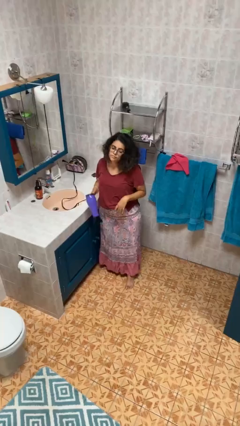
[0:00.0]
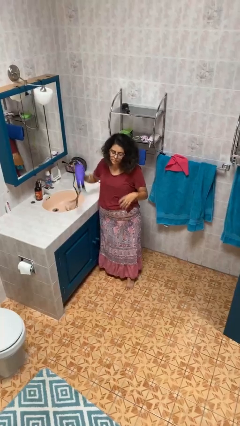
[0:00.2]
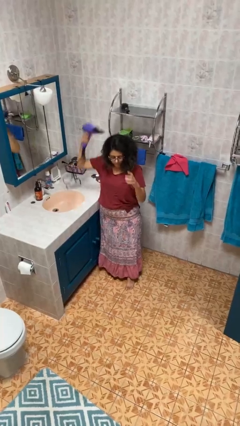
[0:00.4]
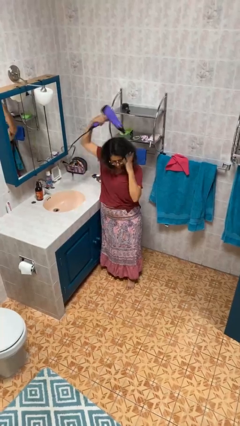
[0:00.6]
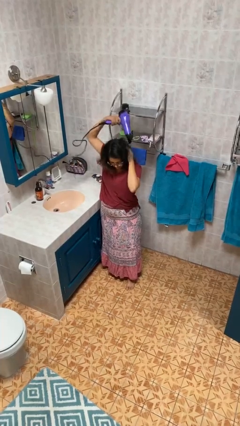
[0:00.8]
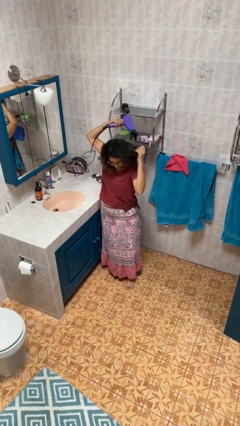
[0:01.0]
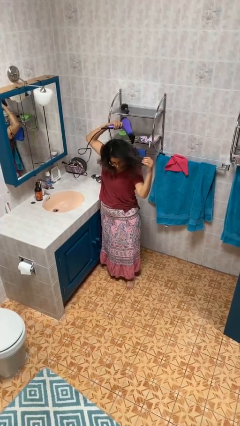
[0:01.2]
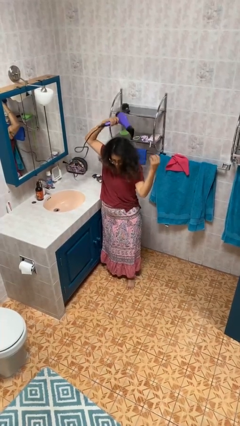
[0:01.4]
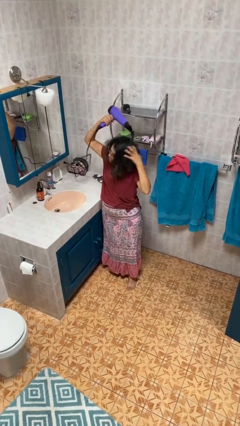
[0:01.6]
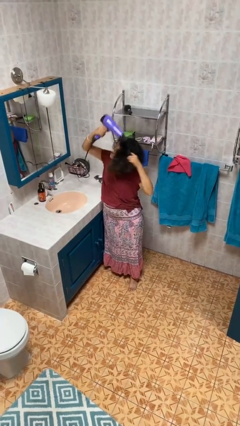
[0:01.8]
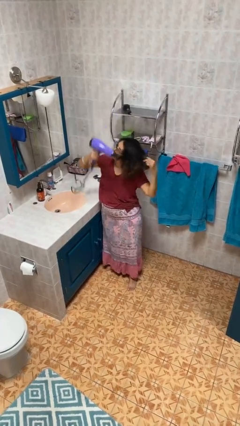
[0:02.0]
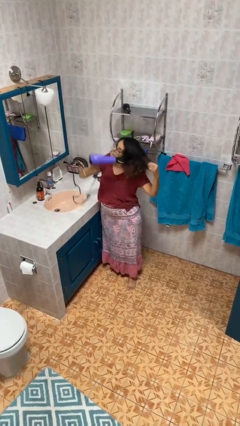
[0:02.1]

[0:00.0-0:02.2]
person dries hair with hairdryer

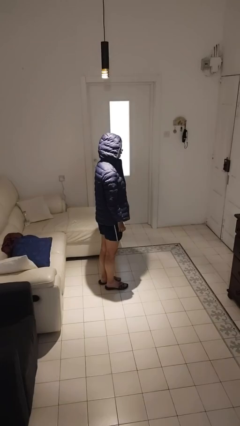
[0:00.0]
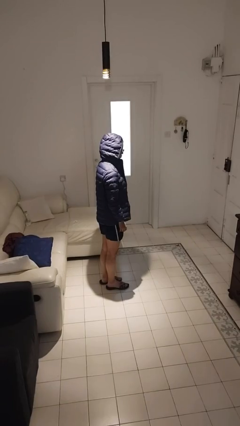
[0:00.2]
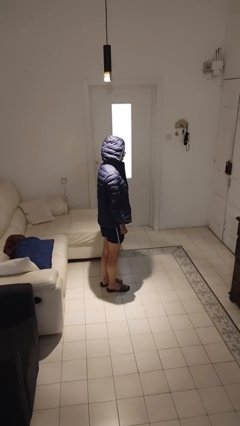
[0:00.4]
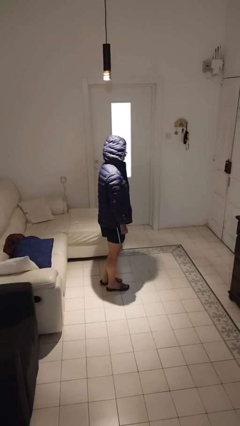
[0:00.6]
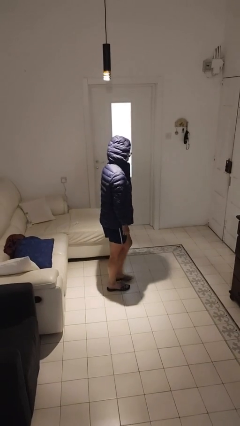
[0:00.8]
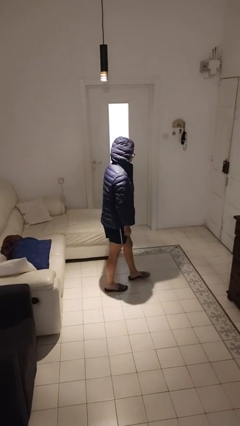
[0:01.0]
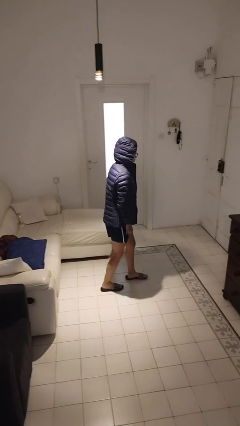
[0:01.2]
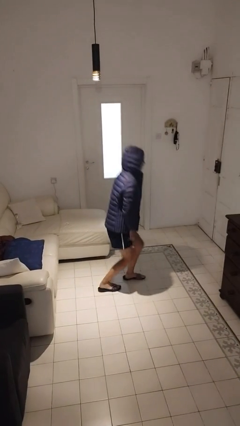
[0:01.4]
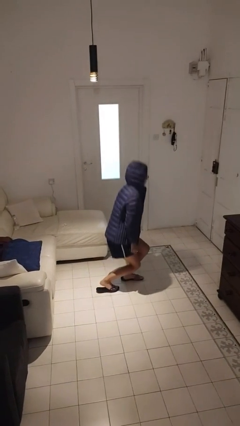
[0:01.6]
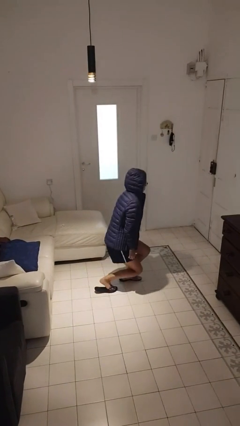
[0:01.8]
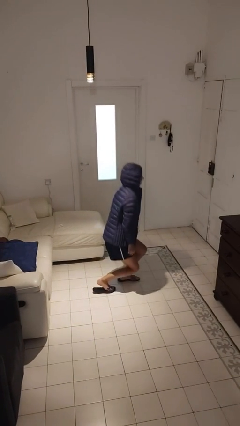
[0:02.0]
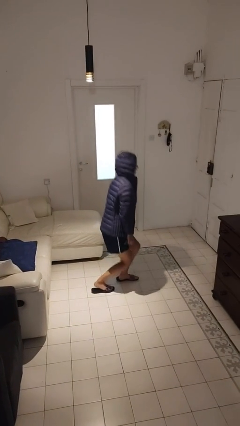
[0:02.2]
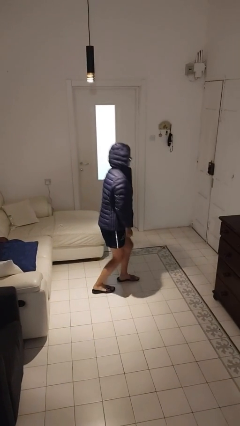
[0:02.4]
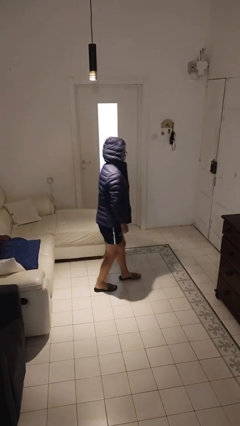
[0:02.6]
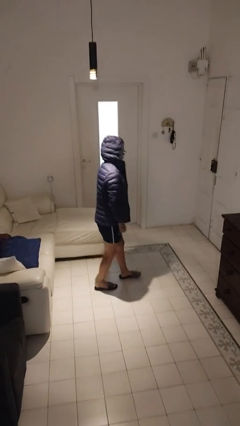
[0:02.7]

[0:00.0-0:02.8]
person exercises with lunges

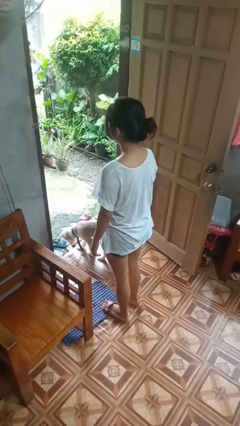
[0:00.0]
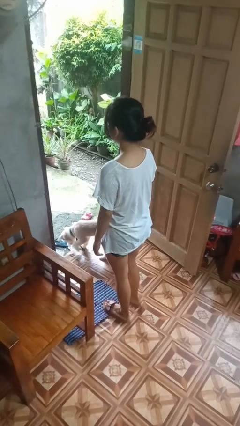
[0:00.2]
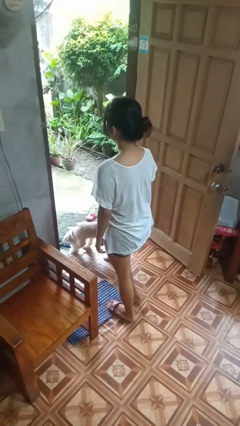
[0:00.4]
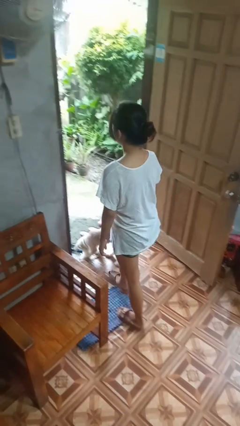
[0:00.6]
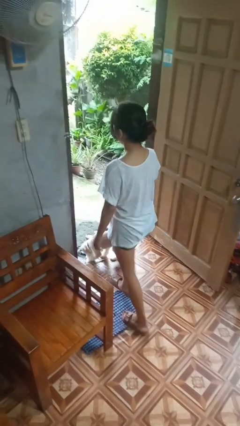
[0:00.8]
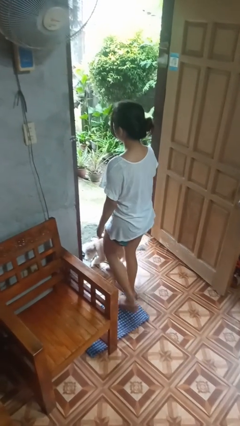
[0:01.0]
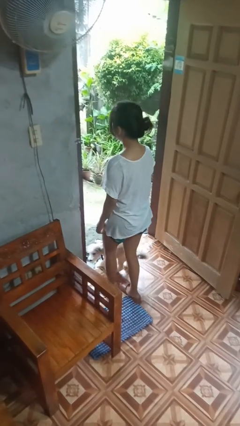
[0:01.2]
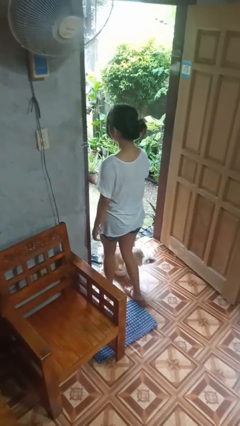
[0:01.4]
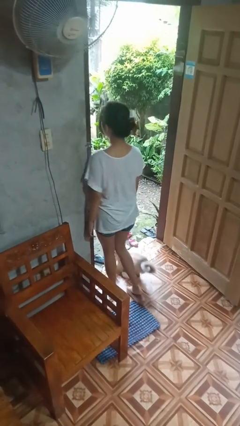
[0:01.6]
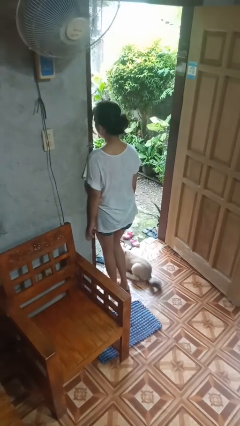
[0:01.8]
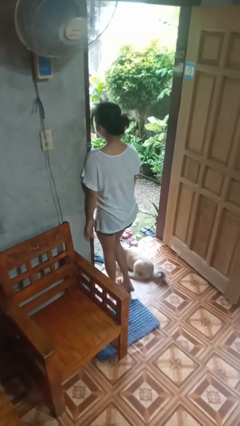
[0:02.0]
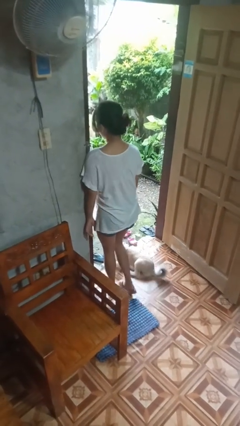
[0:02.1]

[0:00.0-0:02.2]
person bumps into wall

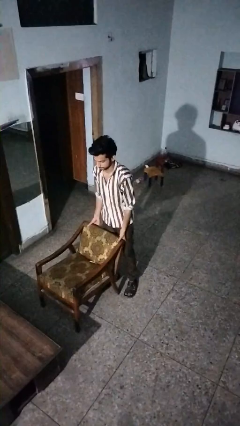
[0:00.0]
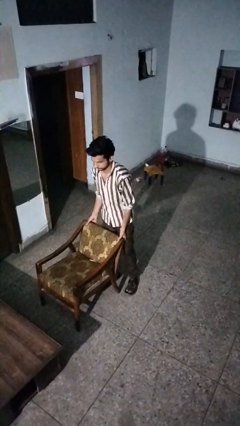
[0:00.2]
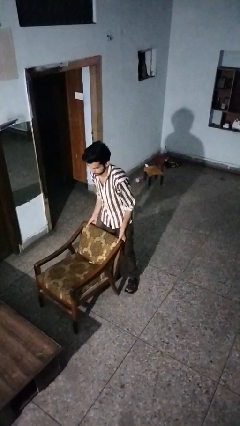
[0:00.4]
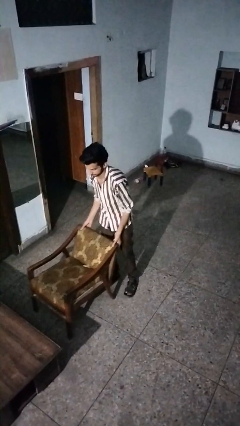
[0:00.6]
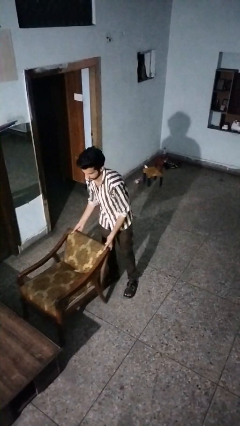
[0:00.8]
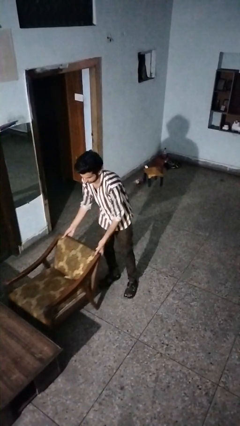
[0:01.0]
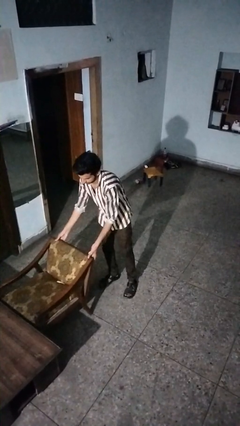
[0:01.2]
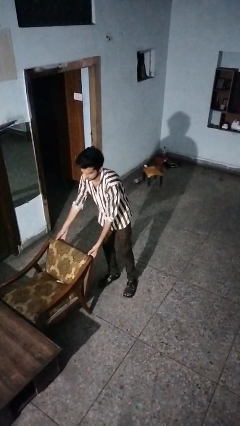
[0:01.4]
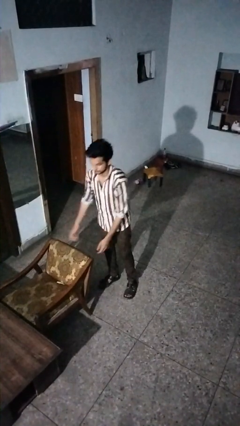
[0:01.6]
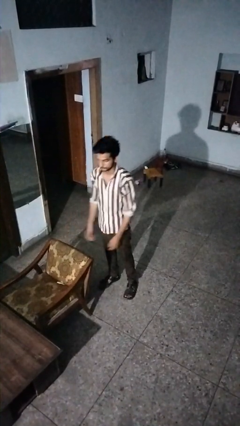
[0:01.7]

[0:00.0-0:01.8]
person pushes in chair

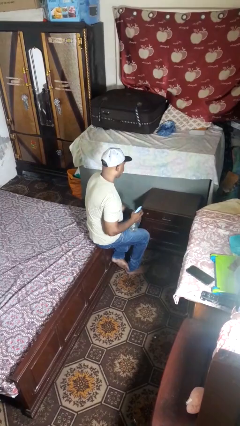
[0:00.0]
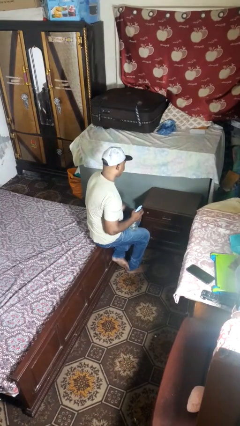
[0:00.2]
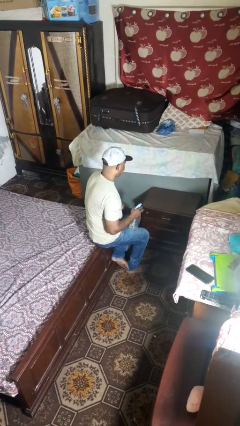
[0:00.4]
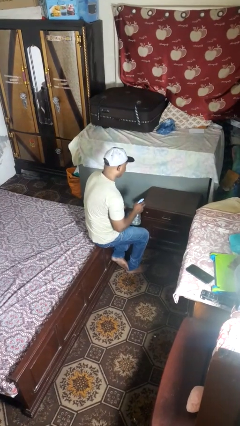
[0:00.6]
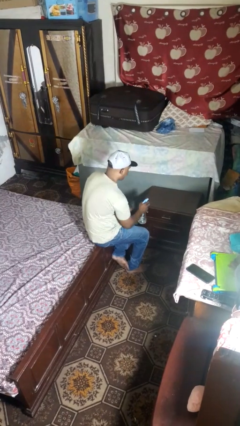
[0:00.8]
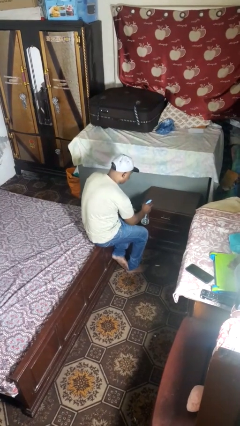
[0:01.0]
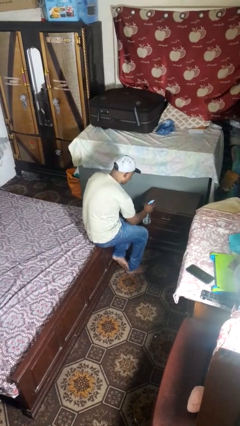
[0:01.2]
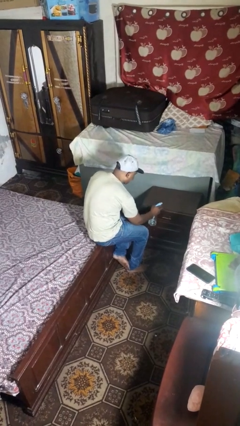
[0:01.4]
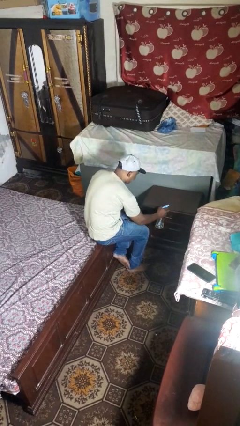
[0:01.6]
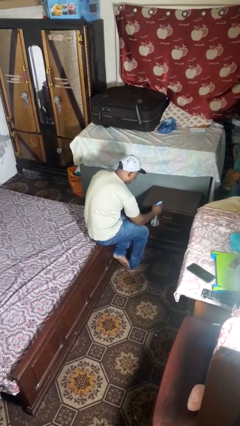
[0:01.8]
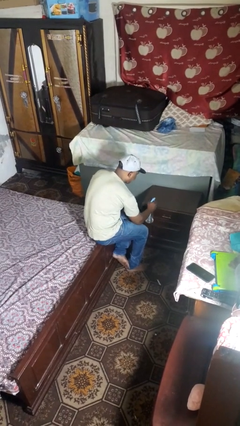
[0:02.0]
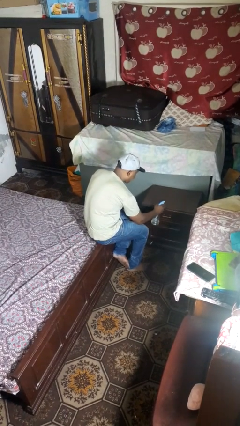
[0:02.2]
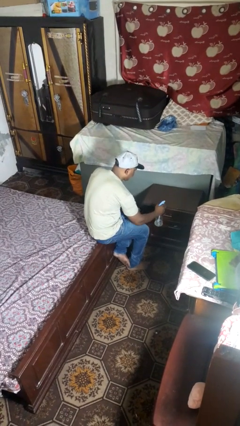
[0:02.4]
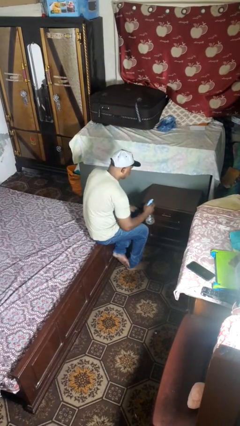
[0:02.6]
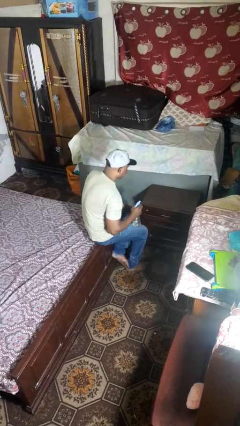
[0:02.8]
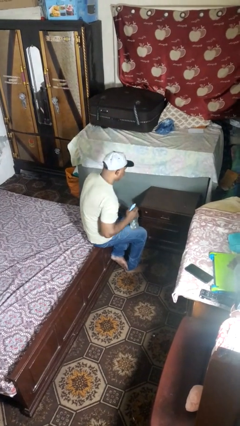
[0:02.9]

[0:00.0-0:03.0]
person sprays from bottle

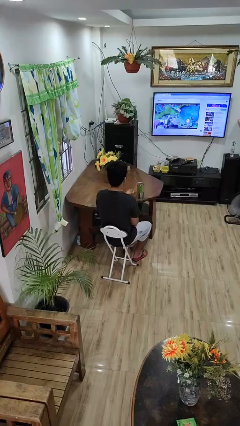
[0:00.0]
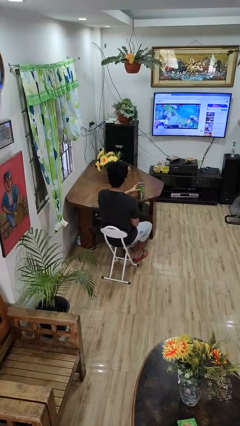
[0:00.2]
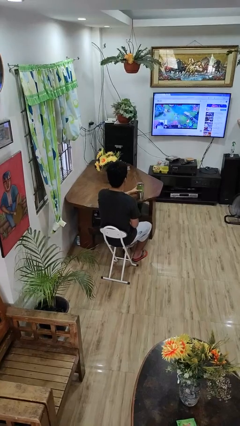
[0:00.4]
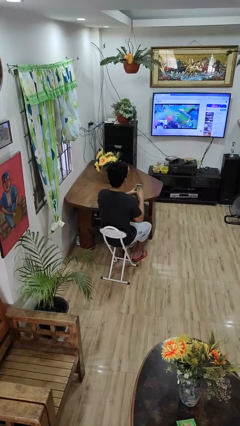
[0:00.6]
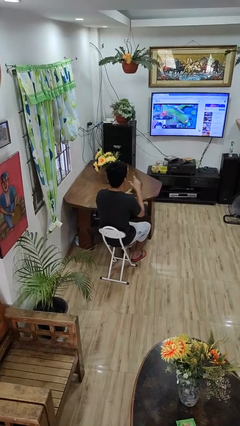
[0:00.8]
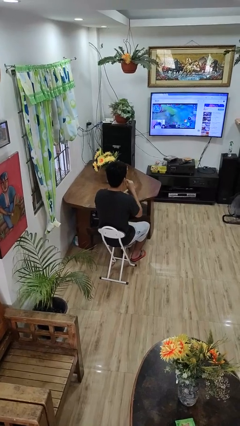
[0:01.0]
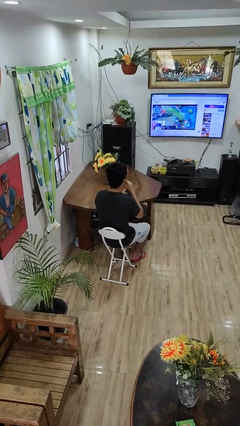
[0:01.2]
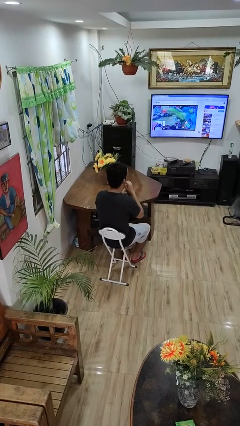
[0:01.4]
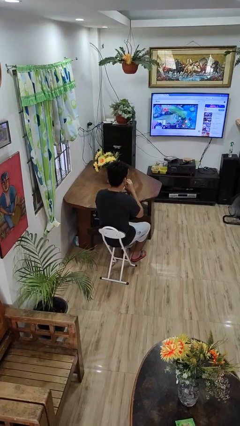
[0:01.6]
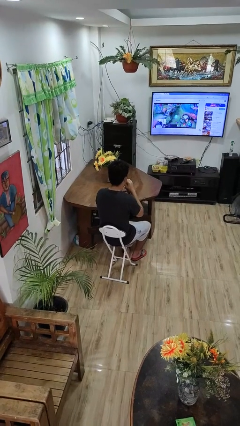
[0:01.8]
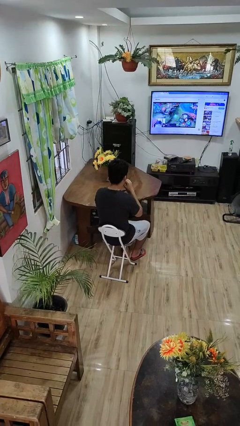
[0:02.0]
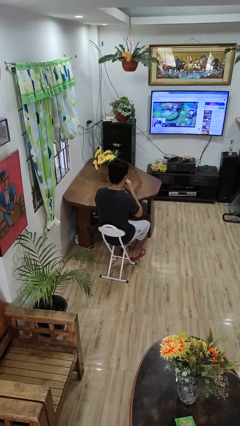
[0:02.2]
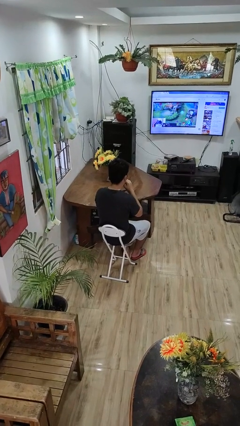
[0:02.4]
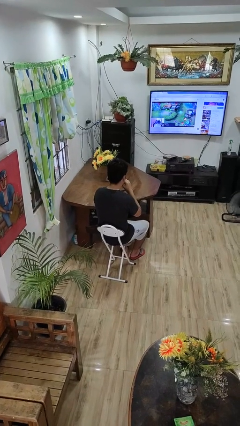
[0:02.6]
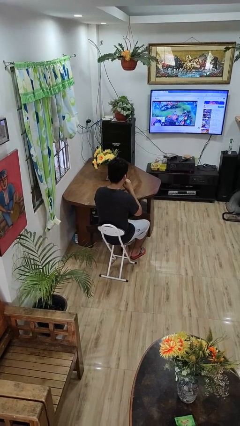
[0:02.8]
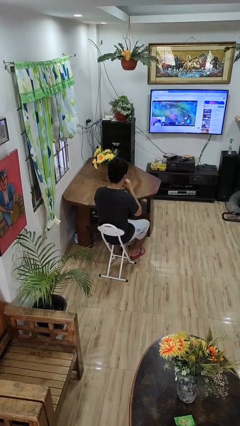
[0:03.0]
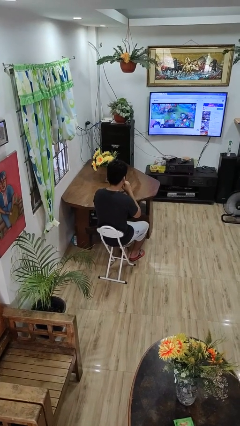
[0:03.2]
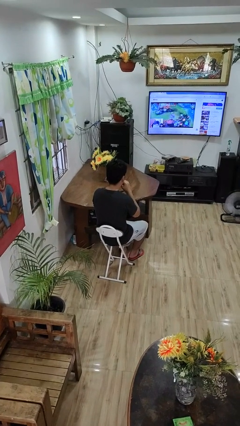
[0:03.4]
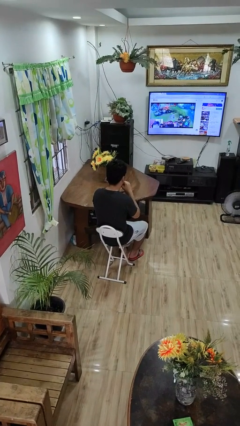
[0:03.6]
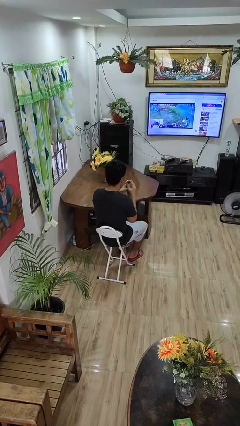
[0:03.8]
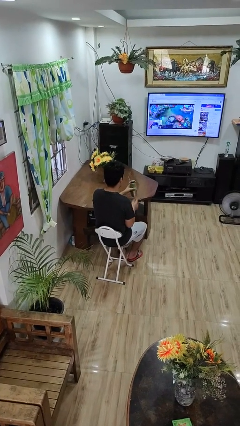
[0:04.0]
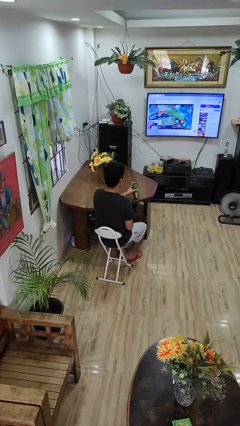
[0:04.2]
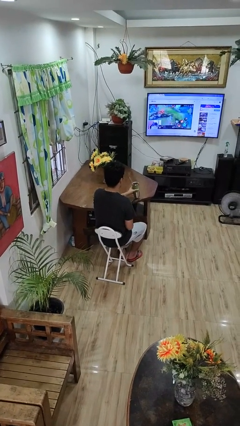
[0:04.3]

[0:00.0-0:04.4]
person drinks from straw

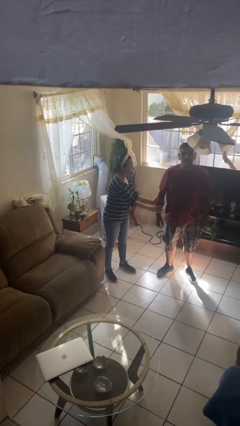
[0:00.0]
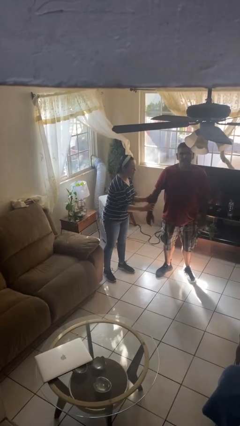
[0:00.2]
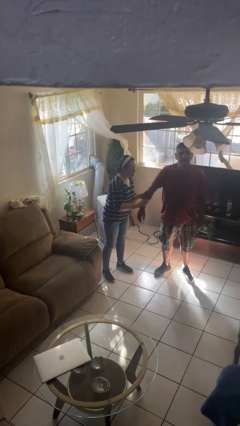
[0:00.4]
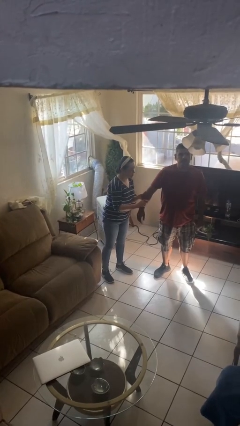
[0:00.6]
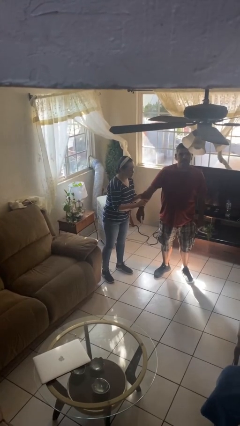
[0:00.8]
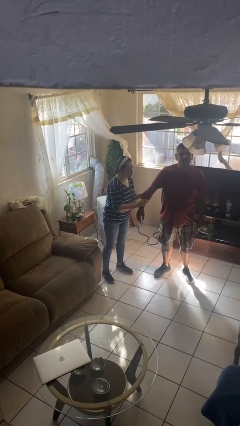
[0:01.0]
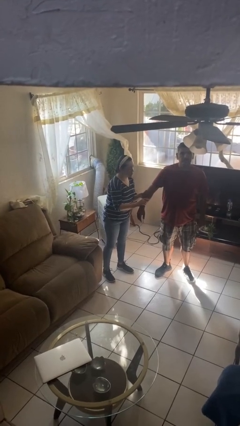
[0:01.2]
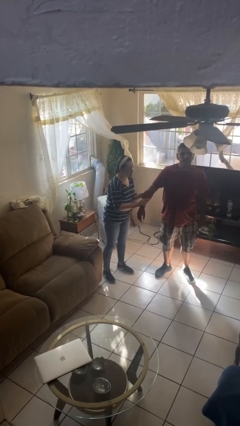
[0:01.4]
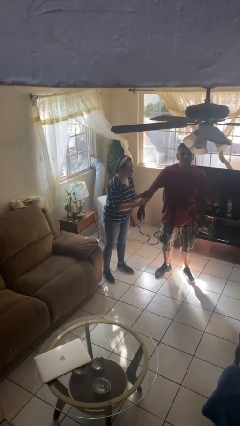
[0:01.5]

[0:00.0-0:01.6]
person grabs person by forearm
